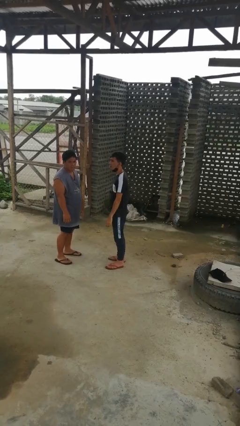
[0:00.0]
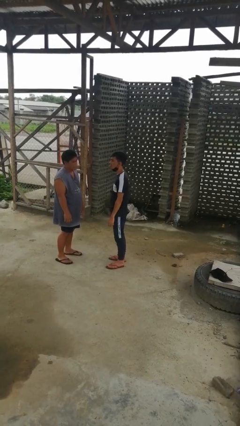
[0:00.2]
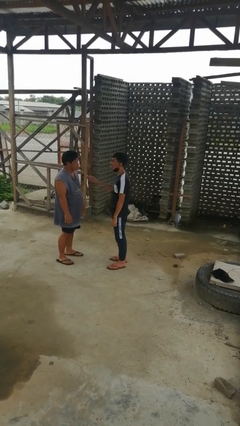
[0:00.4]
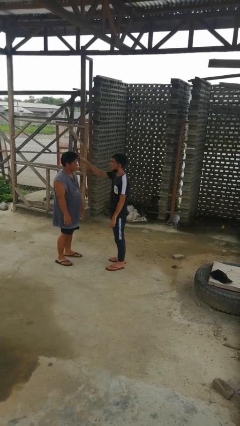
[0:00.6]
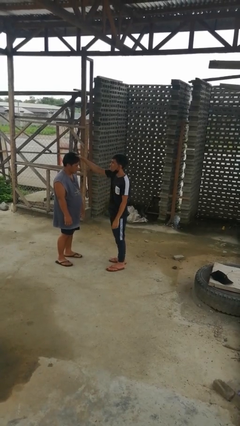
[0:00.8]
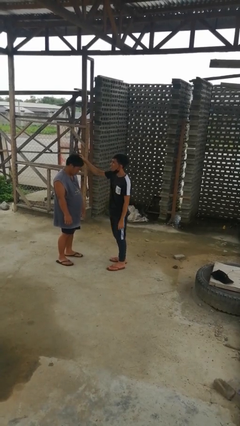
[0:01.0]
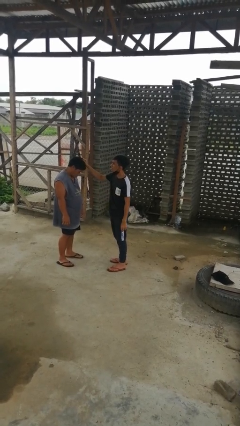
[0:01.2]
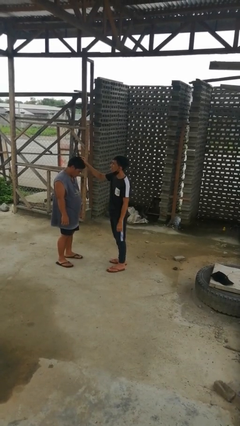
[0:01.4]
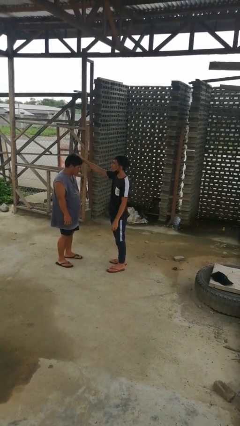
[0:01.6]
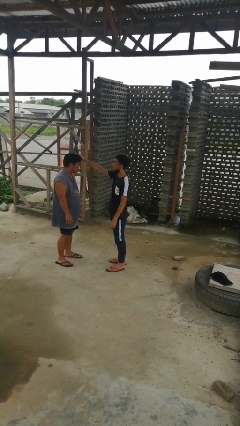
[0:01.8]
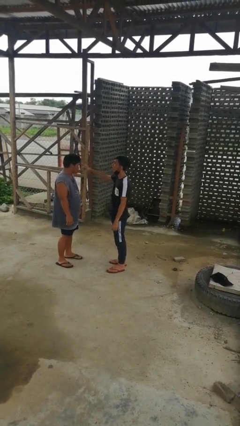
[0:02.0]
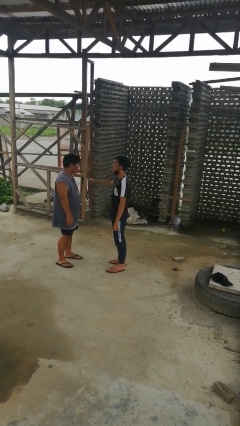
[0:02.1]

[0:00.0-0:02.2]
person grabs person by hair

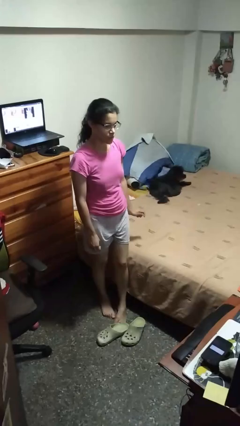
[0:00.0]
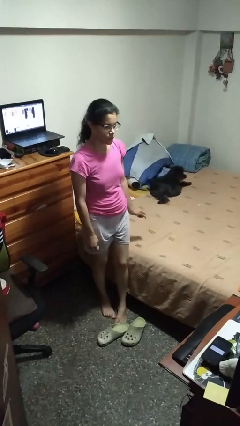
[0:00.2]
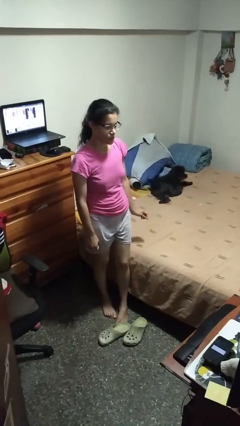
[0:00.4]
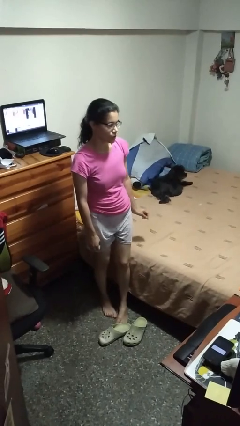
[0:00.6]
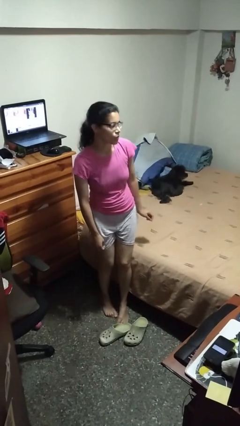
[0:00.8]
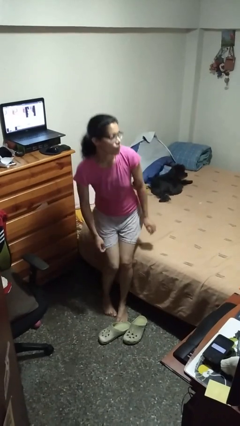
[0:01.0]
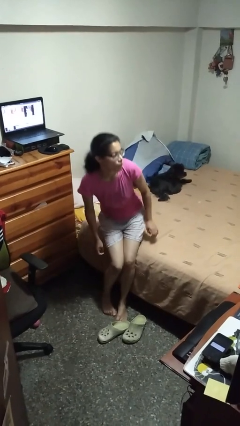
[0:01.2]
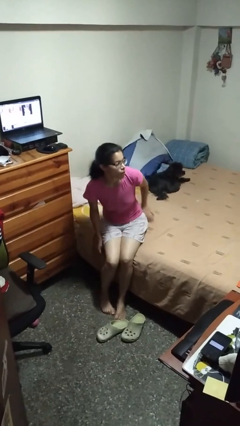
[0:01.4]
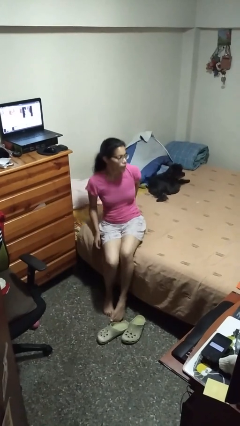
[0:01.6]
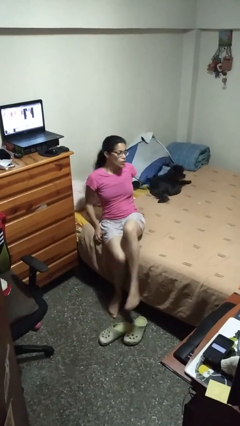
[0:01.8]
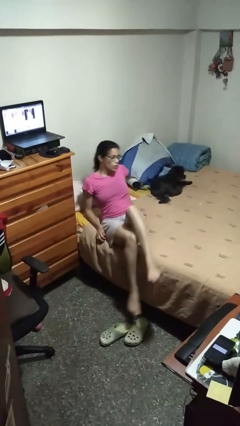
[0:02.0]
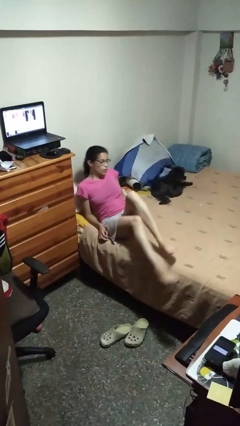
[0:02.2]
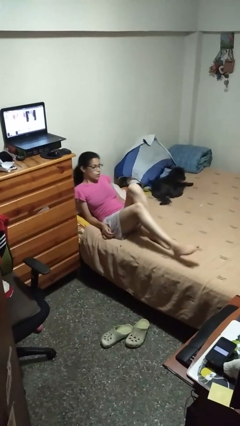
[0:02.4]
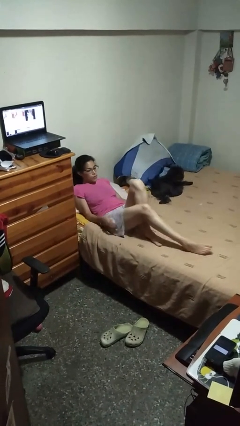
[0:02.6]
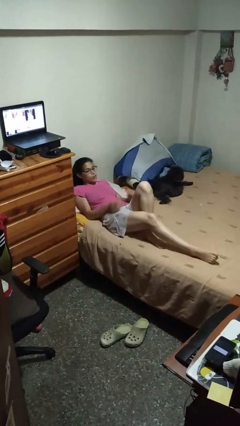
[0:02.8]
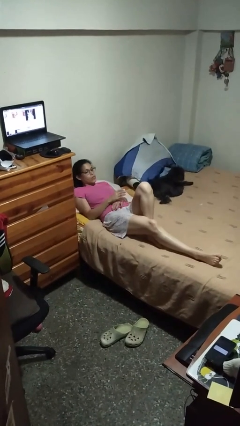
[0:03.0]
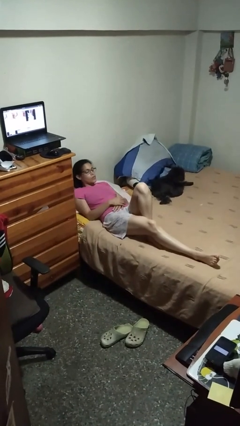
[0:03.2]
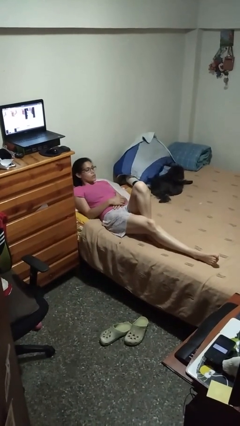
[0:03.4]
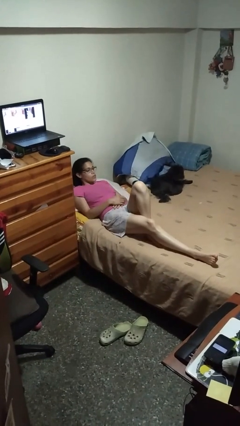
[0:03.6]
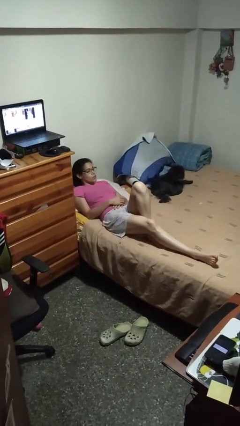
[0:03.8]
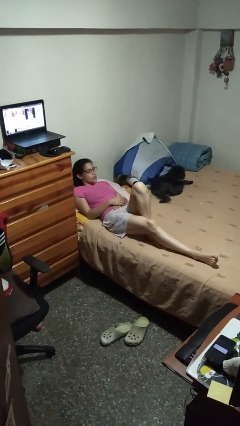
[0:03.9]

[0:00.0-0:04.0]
person lies down on bed

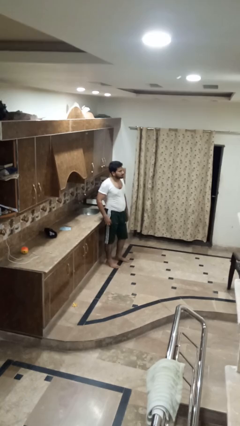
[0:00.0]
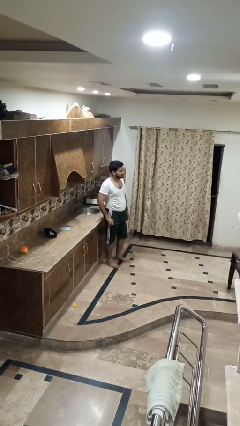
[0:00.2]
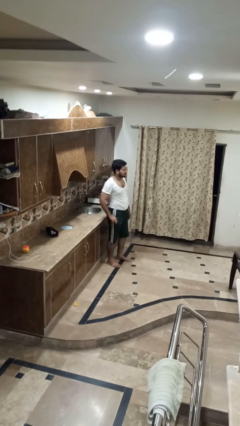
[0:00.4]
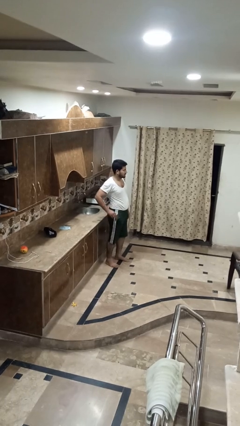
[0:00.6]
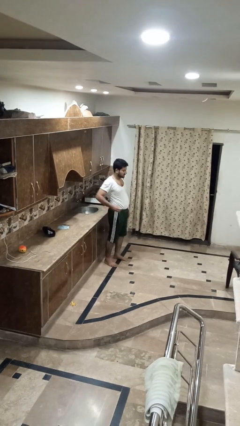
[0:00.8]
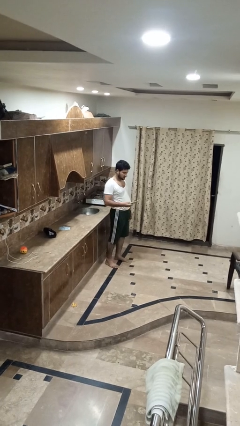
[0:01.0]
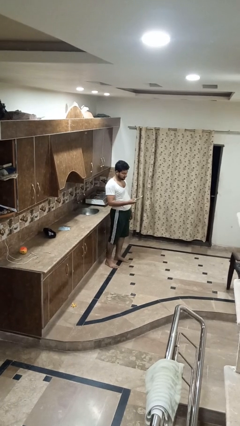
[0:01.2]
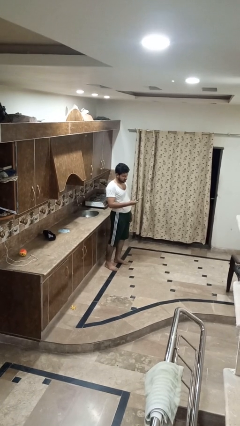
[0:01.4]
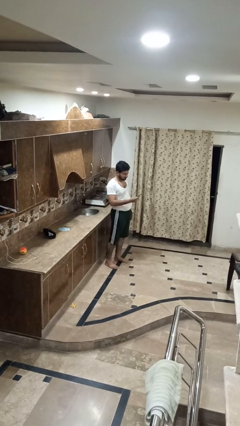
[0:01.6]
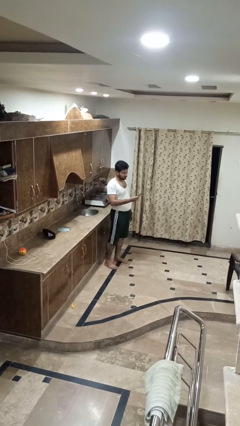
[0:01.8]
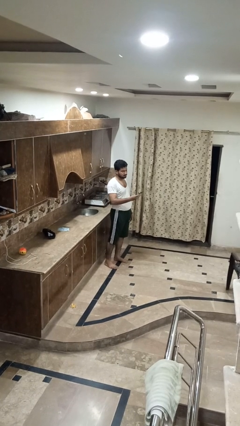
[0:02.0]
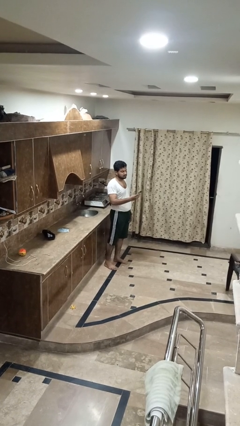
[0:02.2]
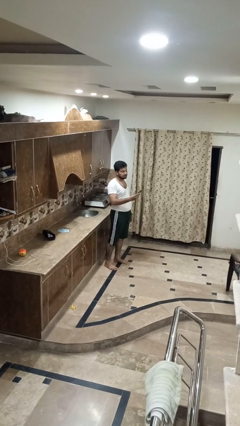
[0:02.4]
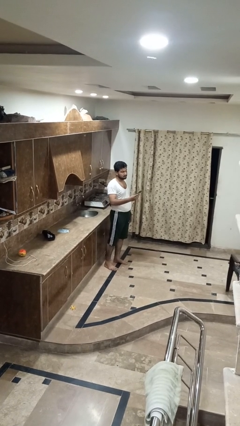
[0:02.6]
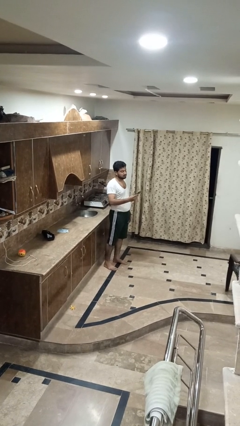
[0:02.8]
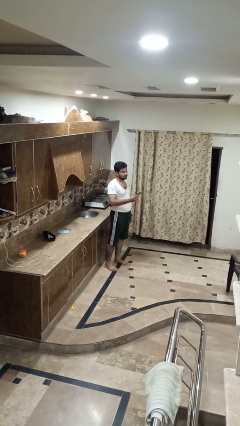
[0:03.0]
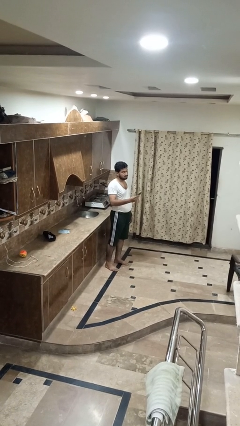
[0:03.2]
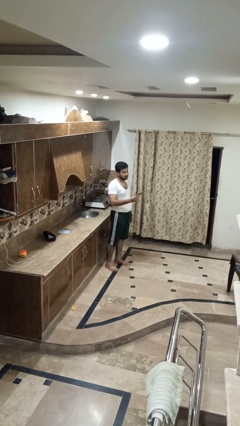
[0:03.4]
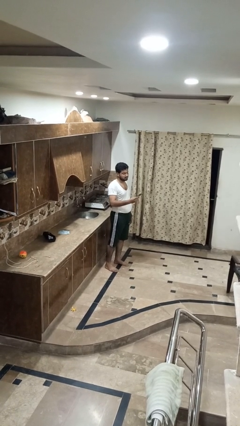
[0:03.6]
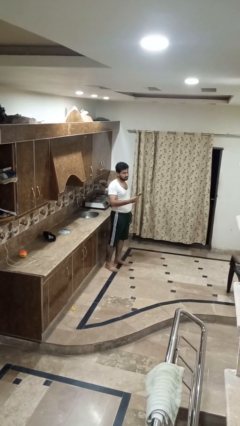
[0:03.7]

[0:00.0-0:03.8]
person takes phone from pocket

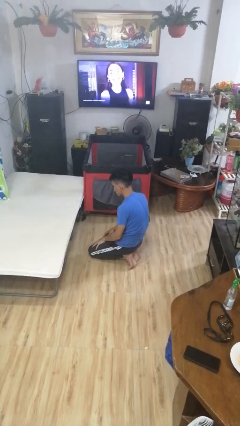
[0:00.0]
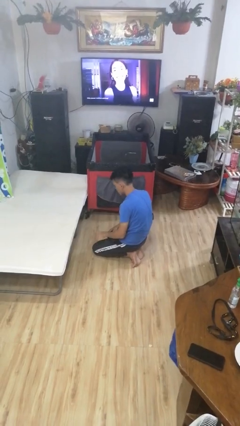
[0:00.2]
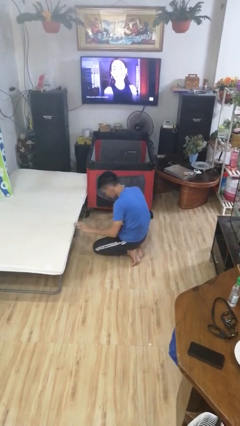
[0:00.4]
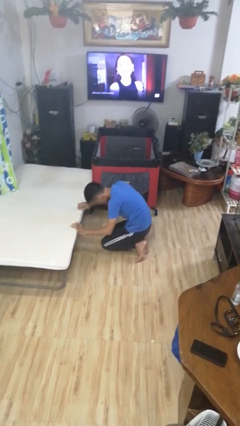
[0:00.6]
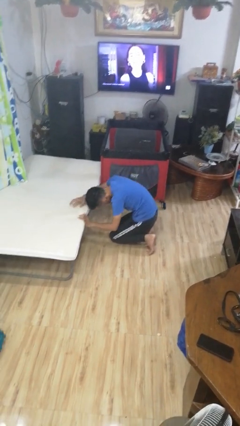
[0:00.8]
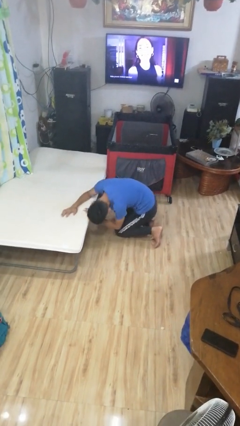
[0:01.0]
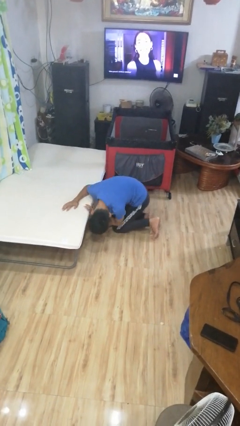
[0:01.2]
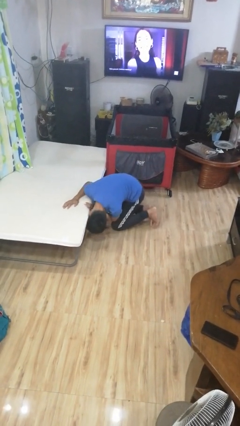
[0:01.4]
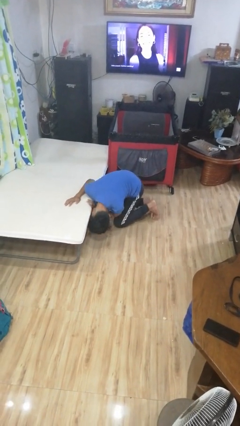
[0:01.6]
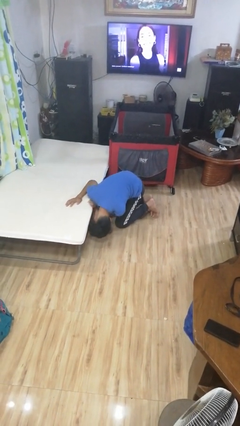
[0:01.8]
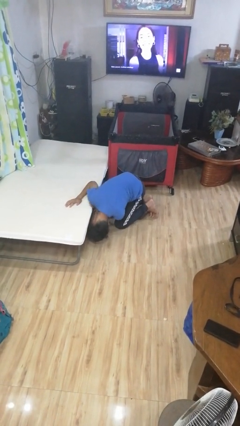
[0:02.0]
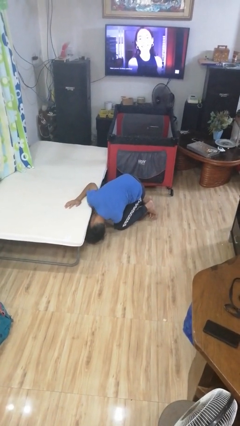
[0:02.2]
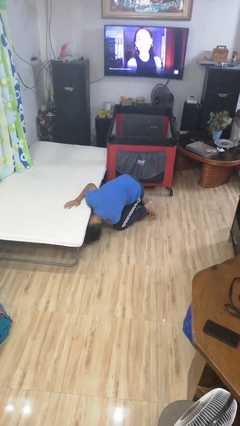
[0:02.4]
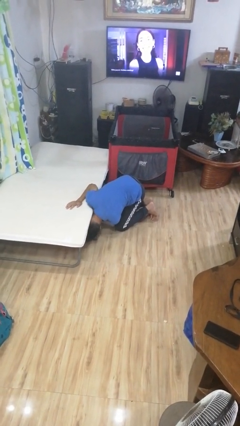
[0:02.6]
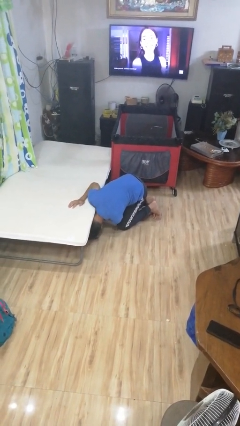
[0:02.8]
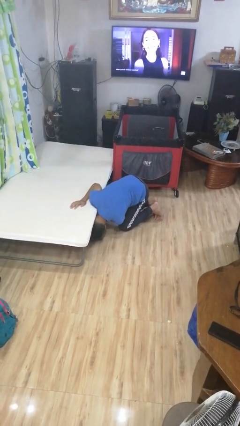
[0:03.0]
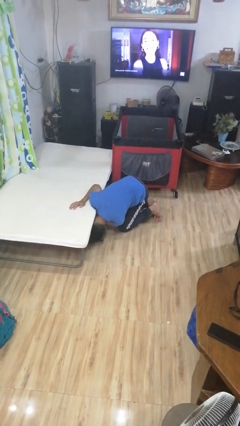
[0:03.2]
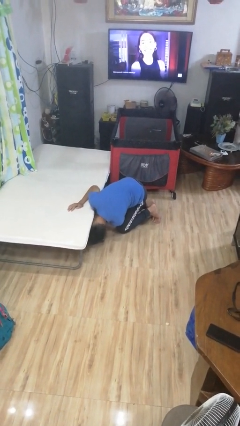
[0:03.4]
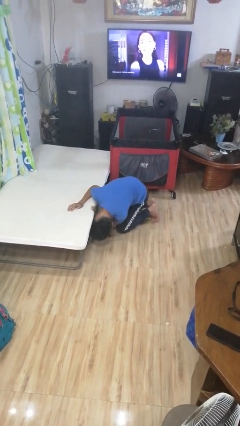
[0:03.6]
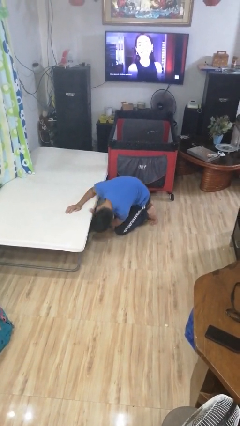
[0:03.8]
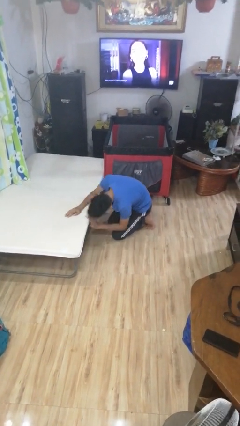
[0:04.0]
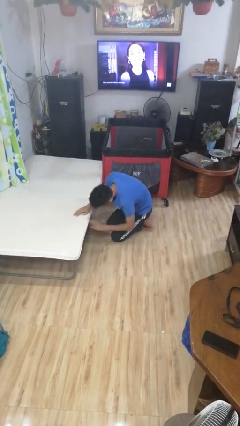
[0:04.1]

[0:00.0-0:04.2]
person searches under bed

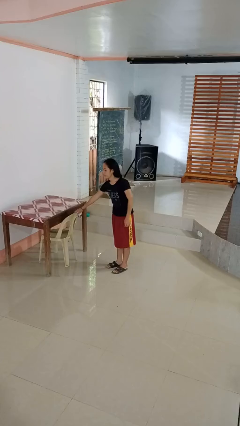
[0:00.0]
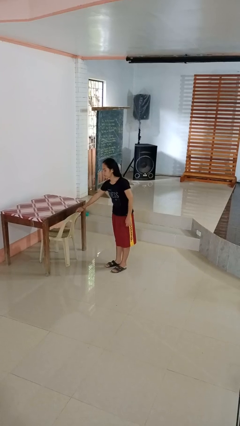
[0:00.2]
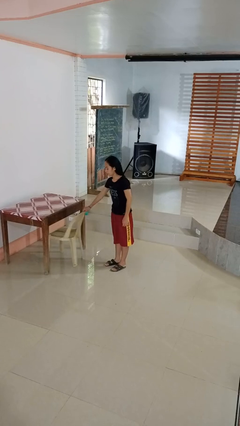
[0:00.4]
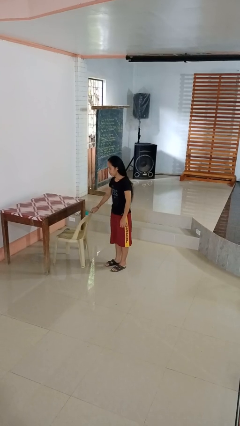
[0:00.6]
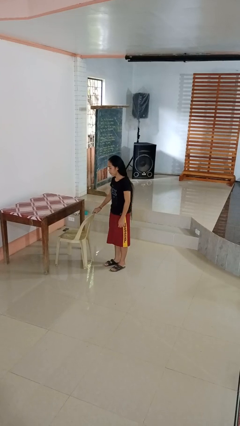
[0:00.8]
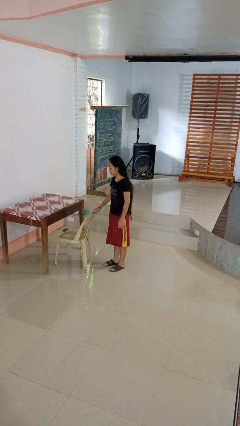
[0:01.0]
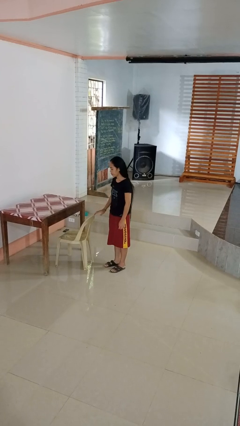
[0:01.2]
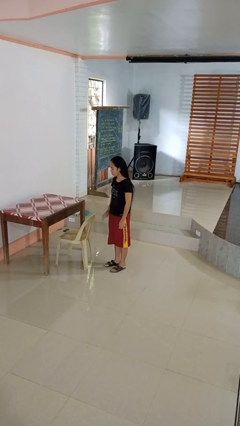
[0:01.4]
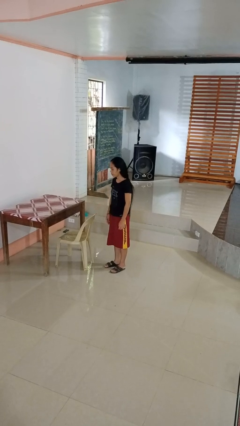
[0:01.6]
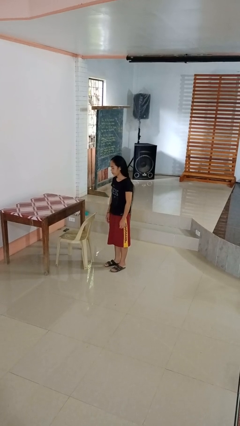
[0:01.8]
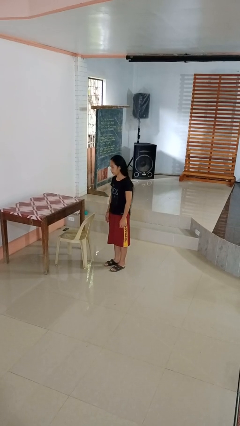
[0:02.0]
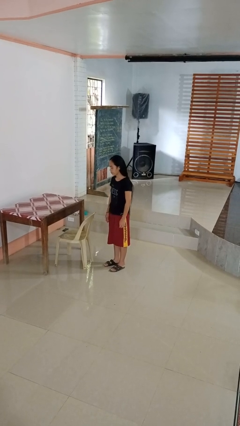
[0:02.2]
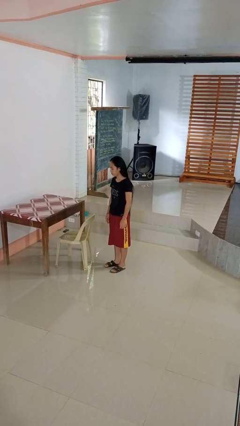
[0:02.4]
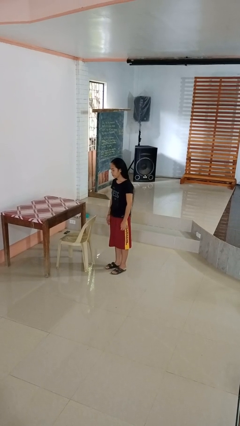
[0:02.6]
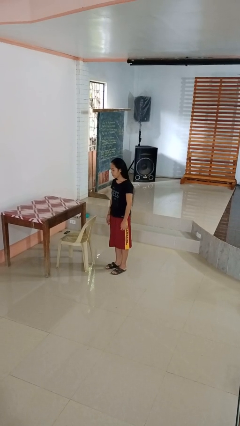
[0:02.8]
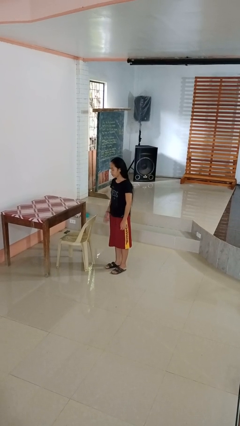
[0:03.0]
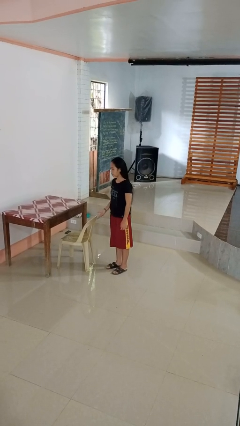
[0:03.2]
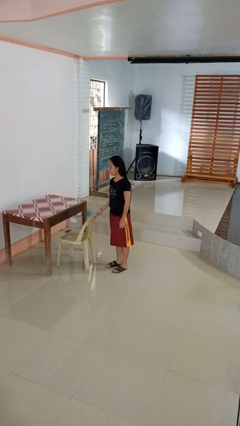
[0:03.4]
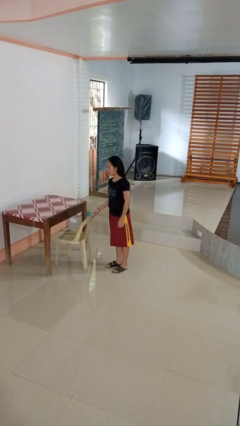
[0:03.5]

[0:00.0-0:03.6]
person pulls out chair
